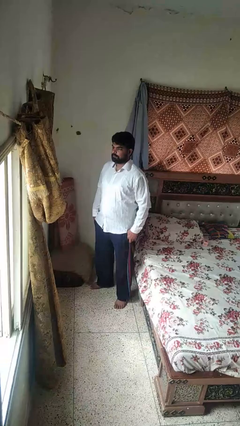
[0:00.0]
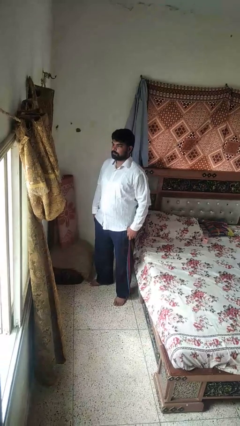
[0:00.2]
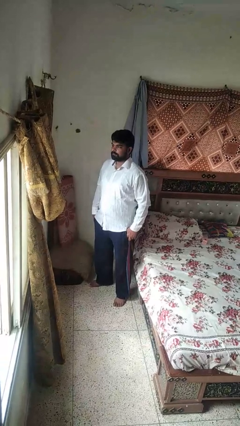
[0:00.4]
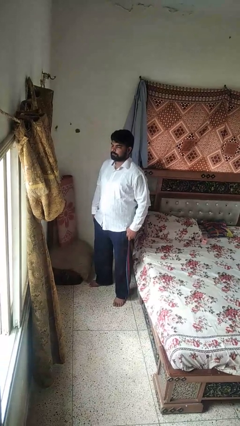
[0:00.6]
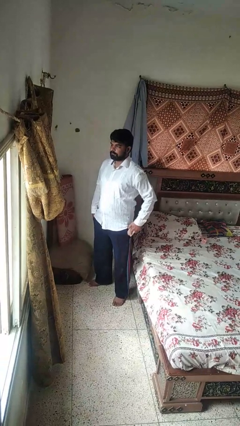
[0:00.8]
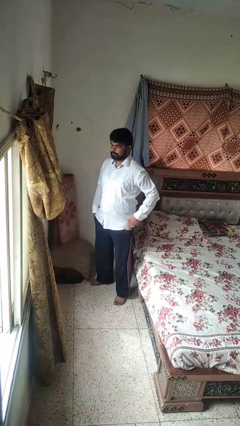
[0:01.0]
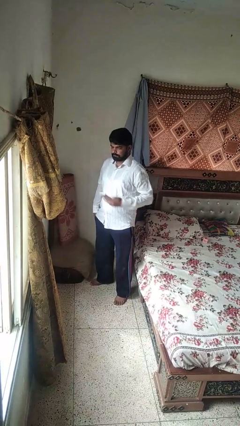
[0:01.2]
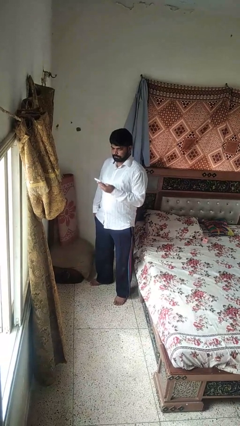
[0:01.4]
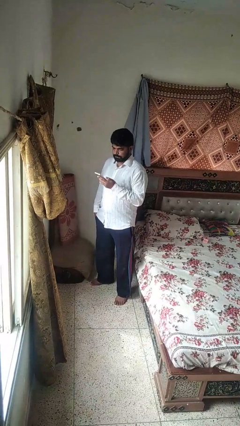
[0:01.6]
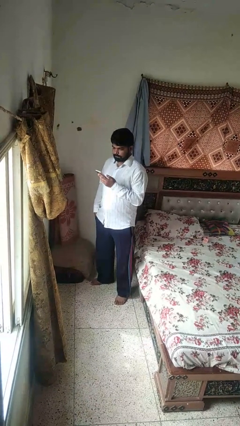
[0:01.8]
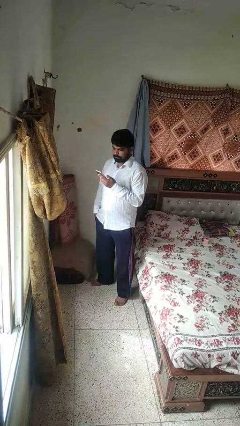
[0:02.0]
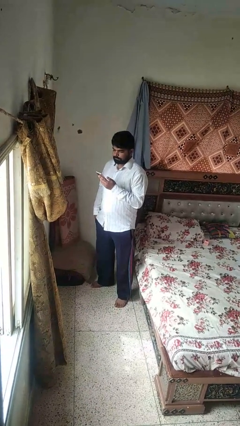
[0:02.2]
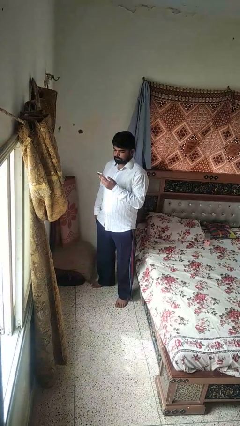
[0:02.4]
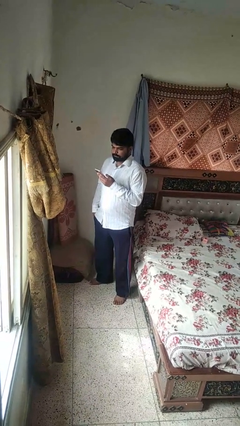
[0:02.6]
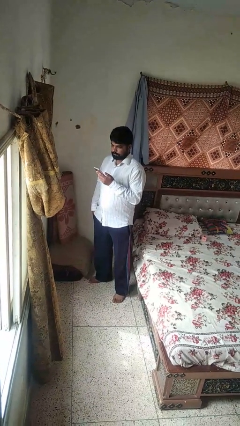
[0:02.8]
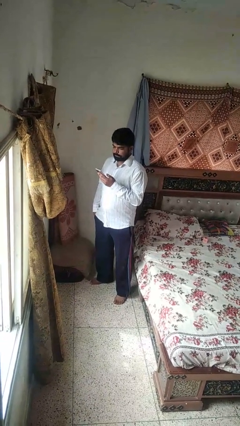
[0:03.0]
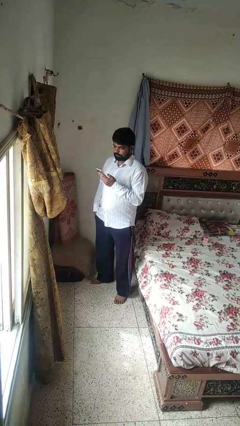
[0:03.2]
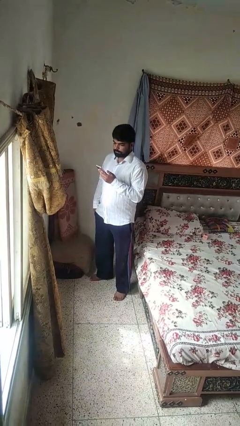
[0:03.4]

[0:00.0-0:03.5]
person takes phone from pocket

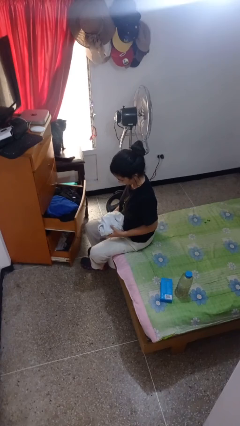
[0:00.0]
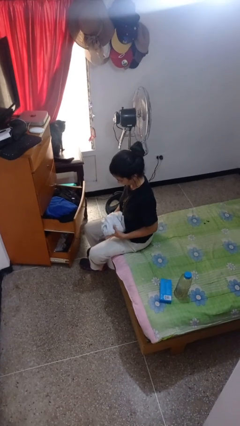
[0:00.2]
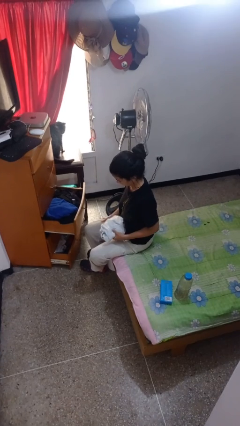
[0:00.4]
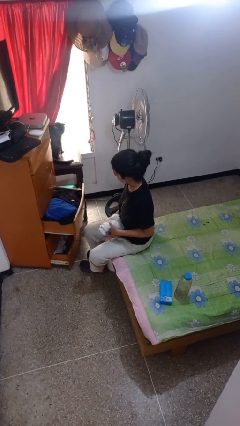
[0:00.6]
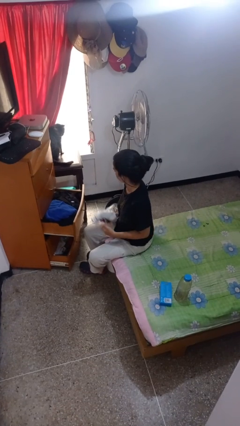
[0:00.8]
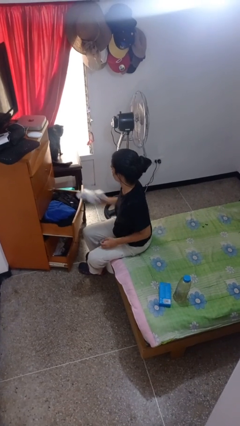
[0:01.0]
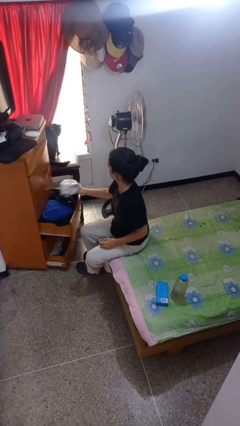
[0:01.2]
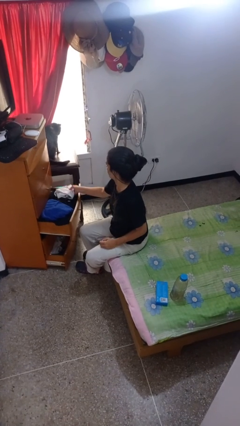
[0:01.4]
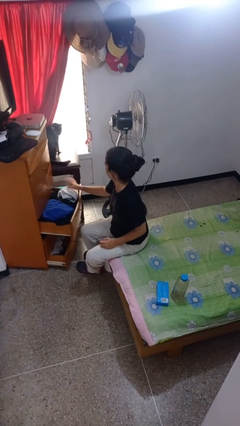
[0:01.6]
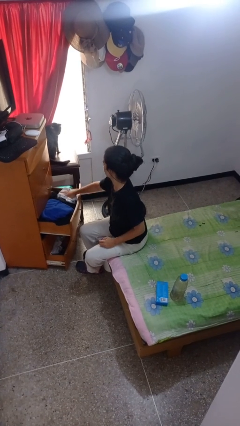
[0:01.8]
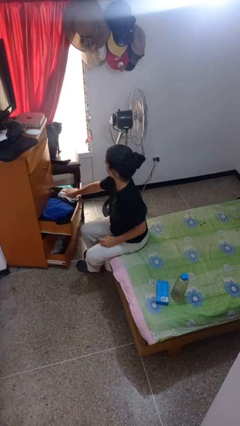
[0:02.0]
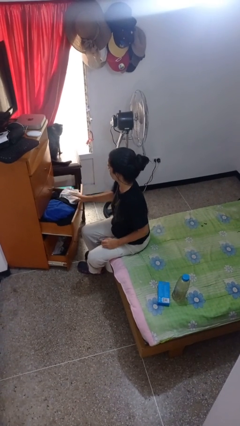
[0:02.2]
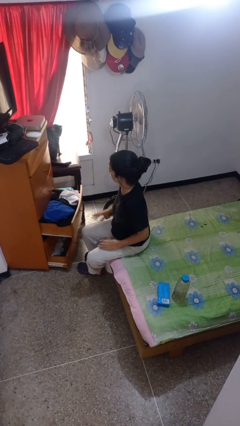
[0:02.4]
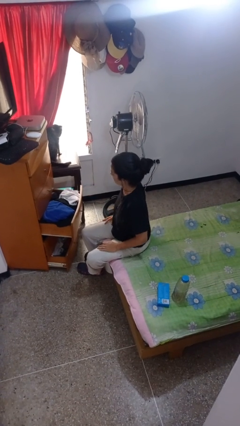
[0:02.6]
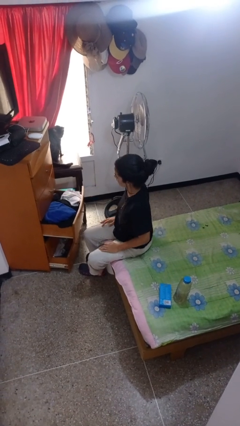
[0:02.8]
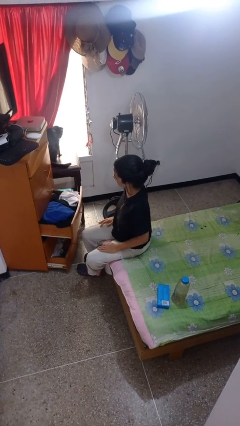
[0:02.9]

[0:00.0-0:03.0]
person puts clothes into dresser

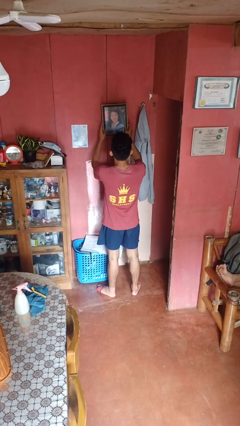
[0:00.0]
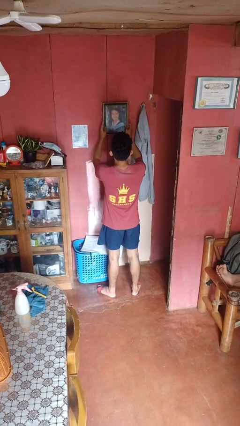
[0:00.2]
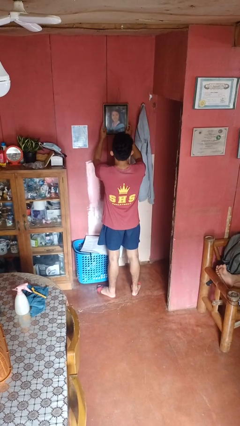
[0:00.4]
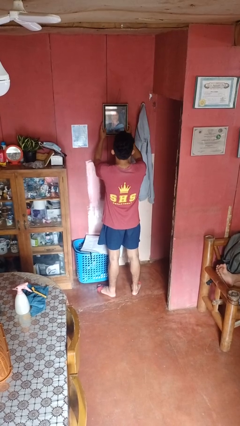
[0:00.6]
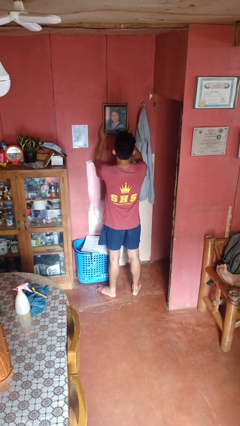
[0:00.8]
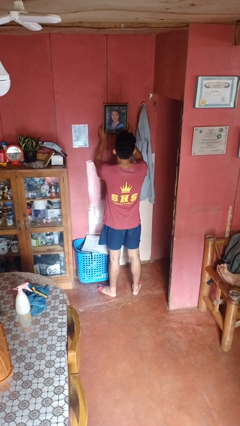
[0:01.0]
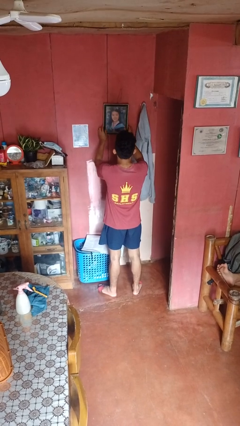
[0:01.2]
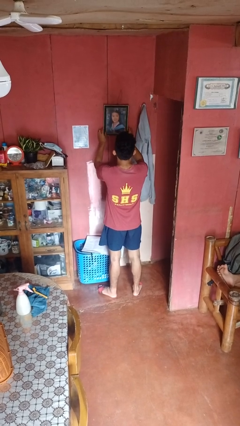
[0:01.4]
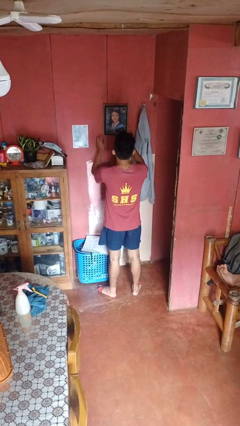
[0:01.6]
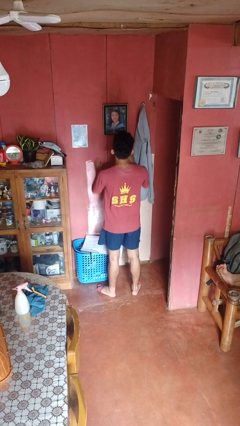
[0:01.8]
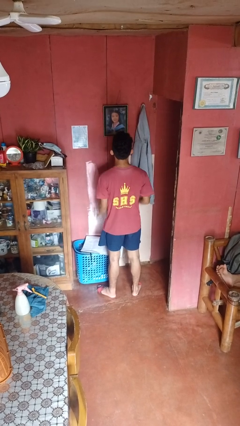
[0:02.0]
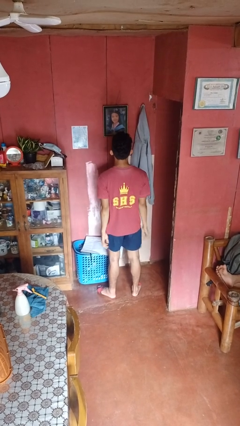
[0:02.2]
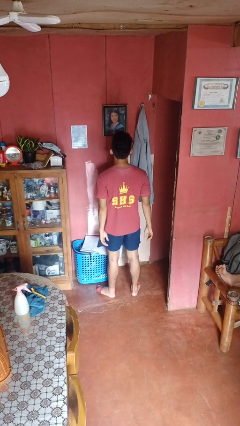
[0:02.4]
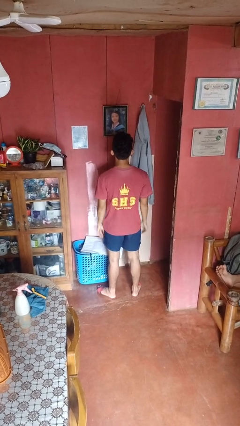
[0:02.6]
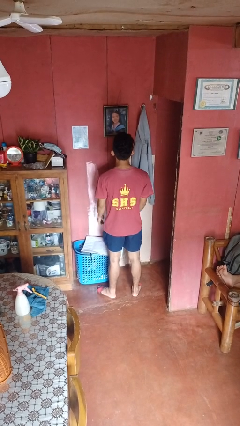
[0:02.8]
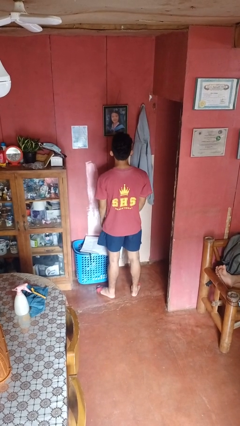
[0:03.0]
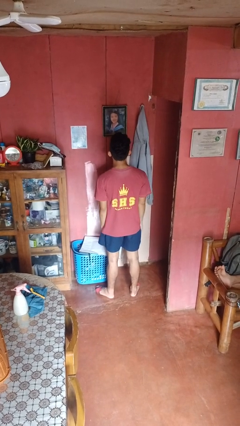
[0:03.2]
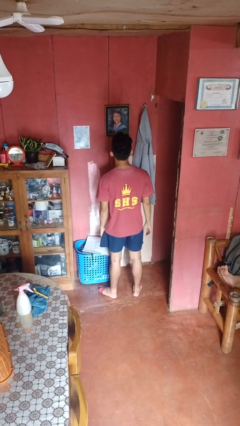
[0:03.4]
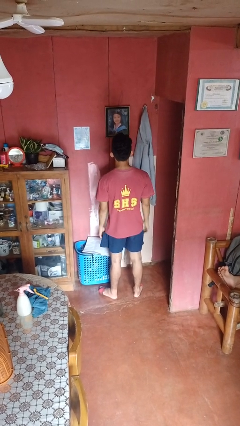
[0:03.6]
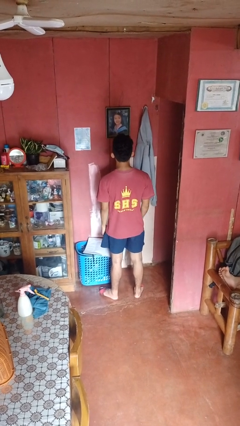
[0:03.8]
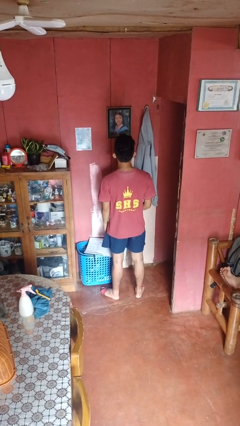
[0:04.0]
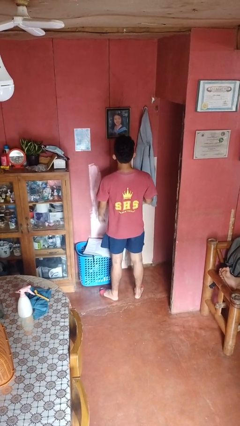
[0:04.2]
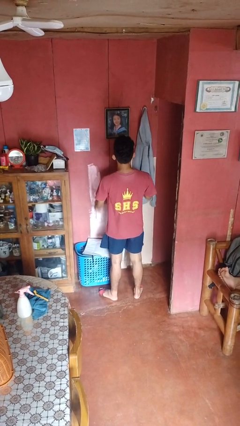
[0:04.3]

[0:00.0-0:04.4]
person puts up picture frame

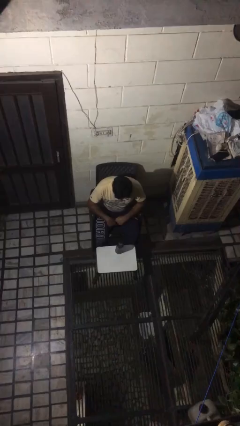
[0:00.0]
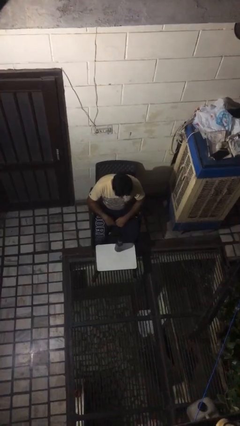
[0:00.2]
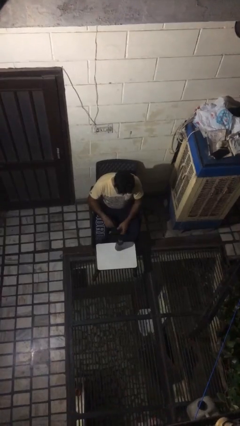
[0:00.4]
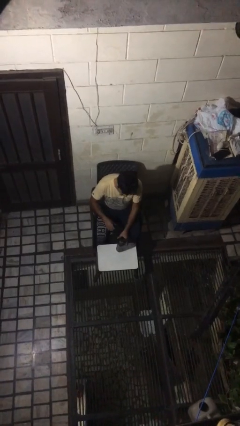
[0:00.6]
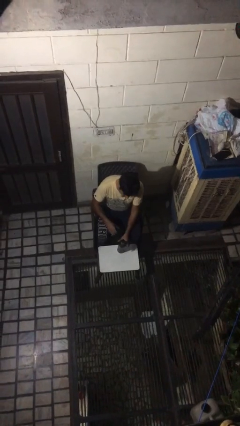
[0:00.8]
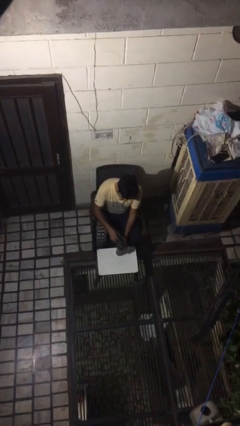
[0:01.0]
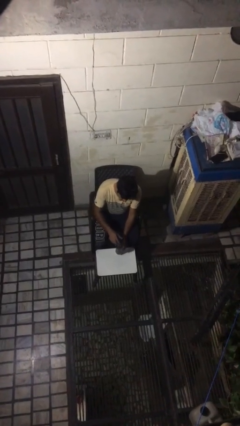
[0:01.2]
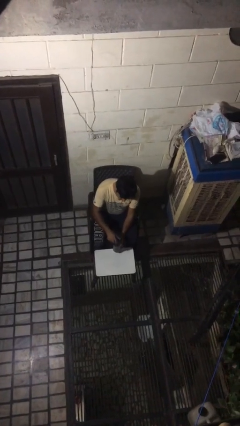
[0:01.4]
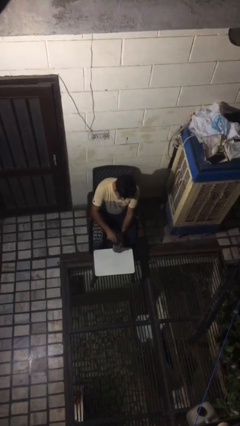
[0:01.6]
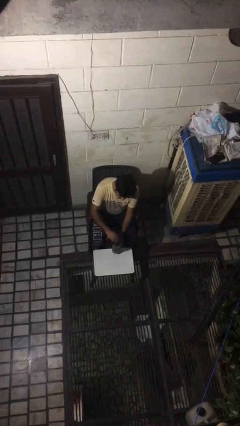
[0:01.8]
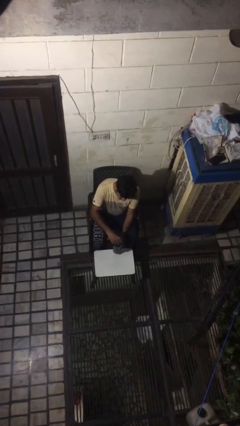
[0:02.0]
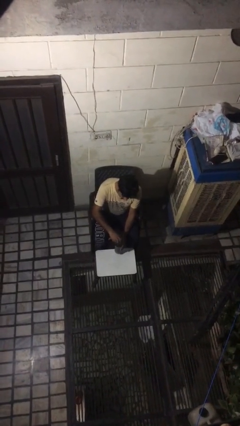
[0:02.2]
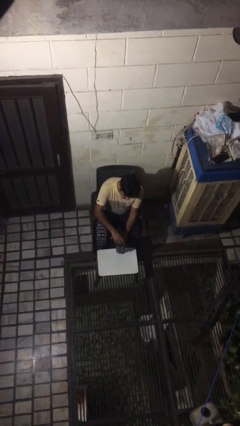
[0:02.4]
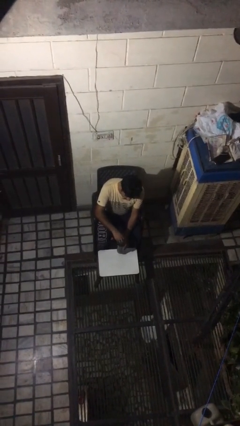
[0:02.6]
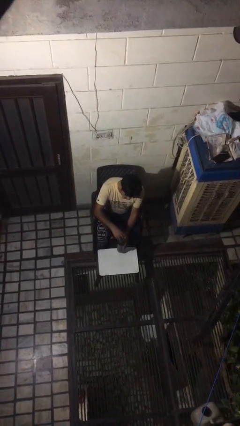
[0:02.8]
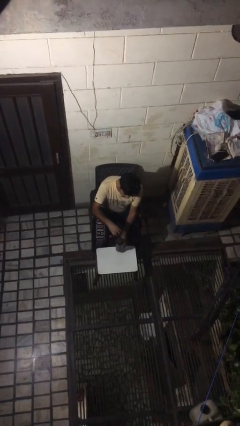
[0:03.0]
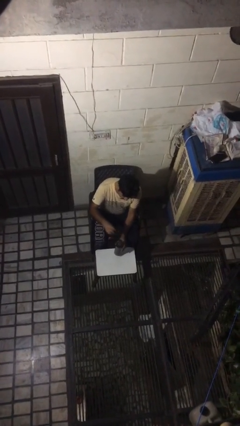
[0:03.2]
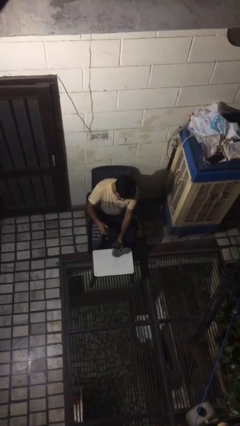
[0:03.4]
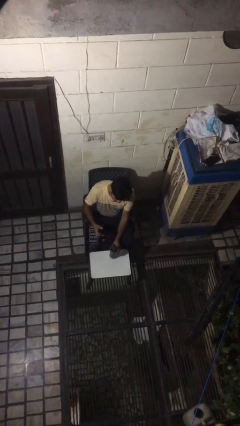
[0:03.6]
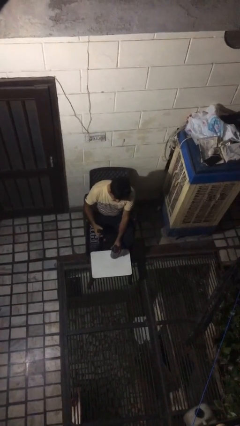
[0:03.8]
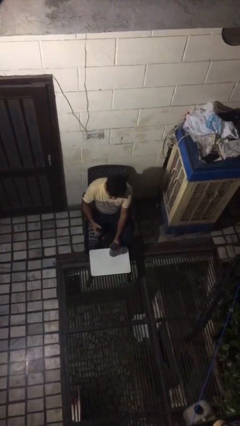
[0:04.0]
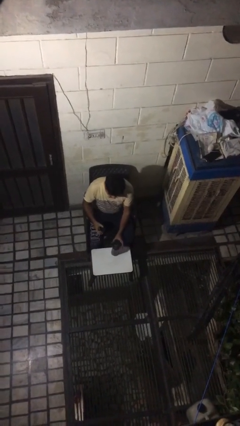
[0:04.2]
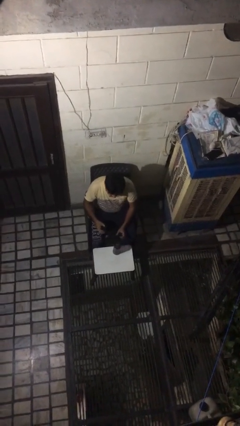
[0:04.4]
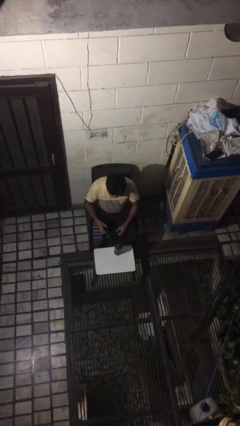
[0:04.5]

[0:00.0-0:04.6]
person unscrews lid from bottle

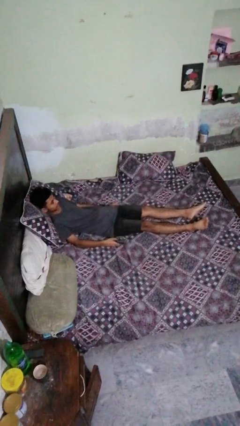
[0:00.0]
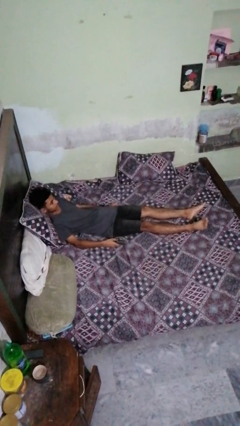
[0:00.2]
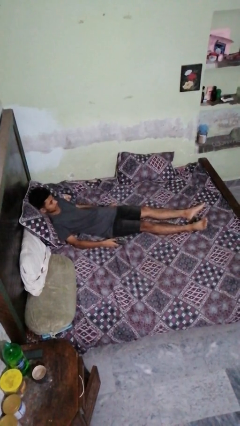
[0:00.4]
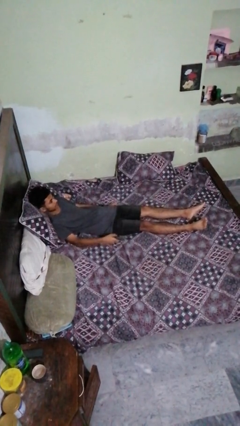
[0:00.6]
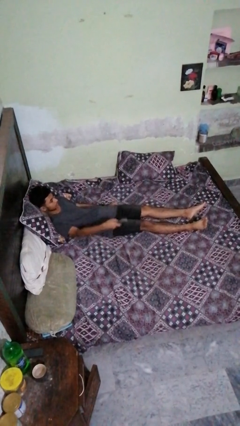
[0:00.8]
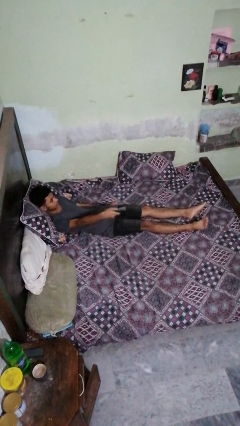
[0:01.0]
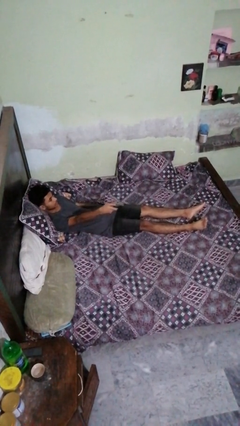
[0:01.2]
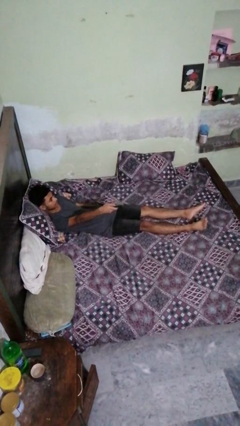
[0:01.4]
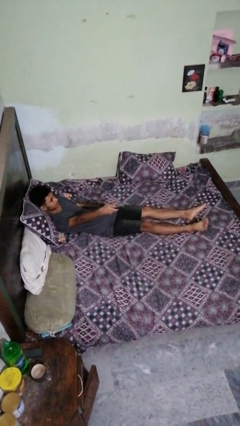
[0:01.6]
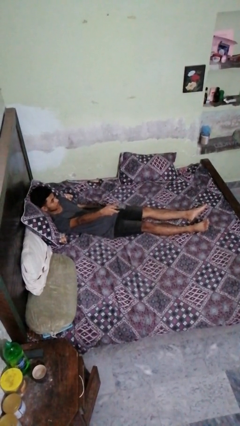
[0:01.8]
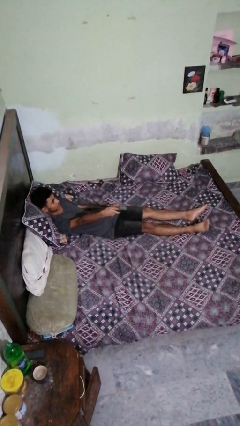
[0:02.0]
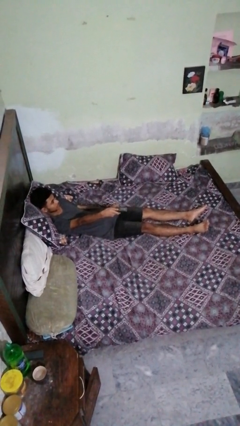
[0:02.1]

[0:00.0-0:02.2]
person uses television remote

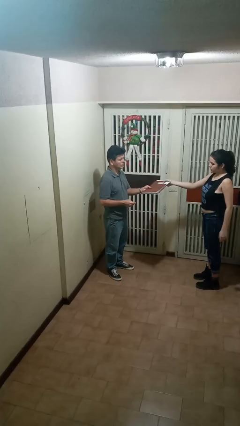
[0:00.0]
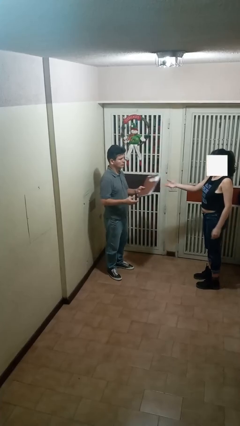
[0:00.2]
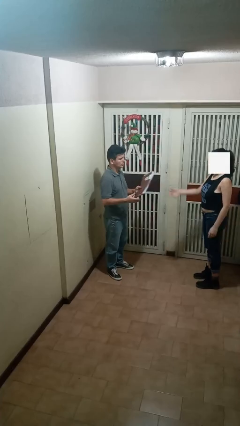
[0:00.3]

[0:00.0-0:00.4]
person transfers object to person
